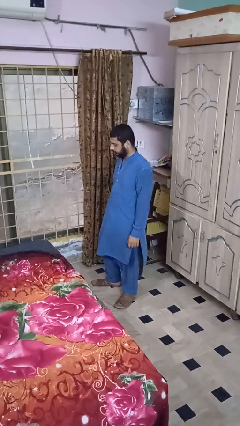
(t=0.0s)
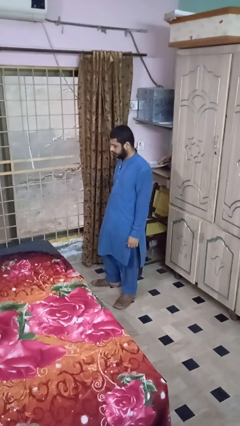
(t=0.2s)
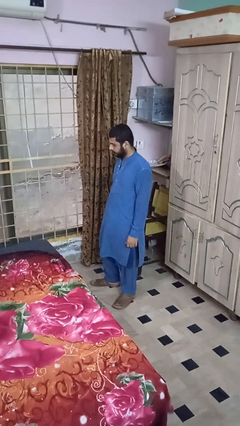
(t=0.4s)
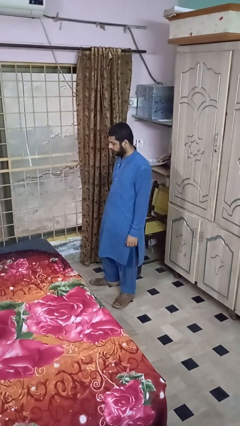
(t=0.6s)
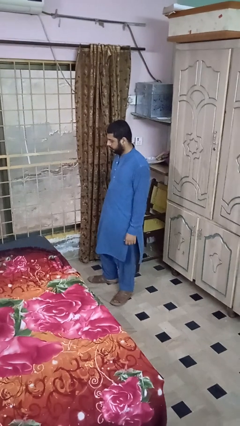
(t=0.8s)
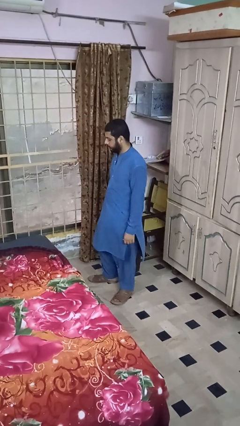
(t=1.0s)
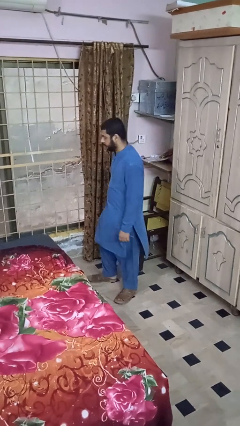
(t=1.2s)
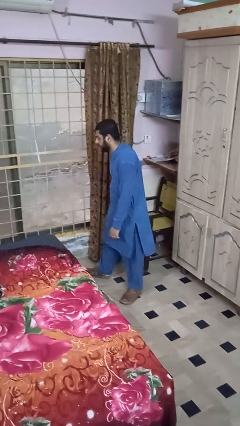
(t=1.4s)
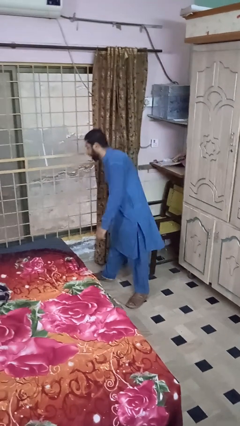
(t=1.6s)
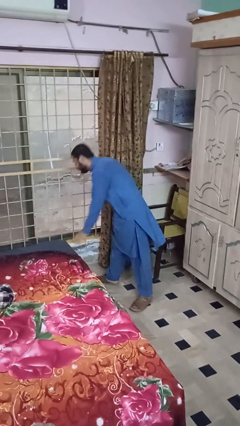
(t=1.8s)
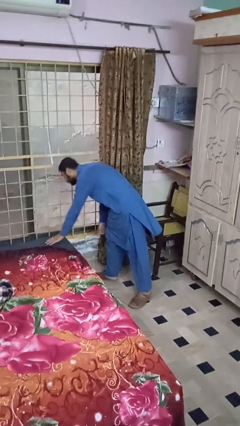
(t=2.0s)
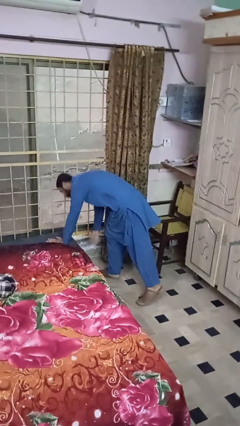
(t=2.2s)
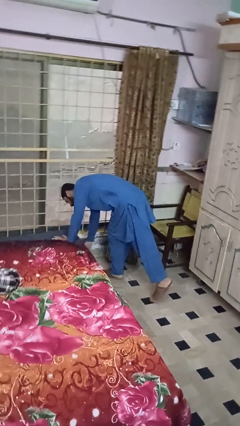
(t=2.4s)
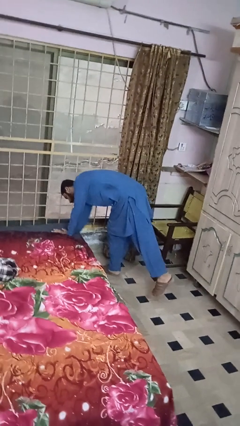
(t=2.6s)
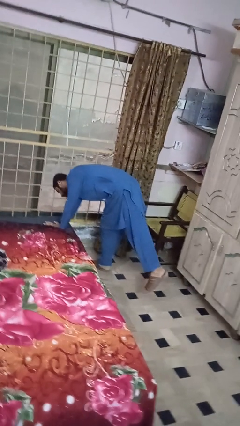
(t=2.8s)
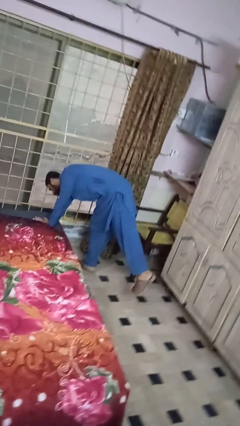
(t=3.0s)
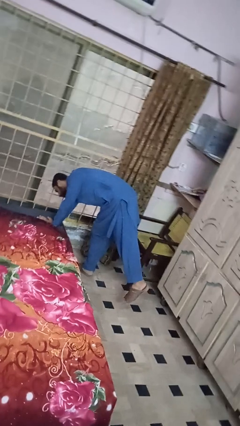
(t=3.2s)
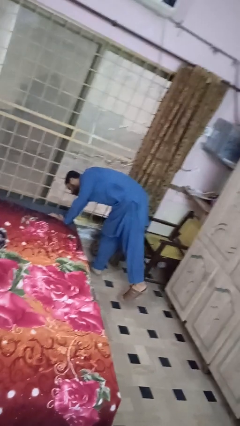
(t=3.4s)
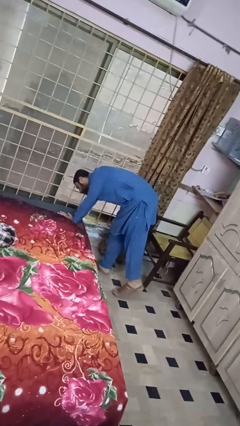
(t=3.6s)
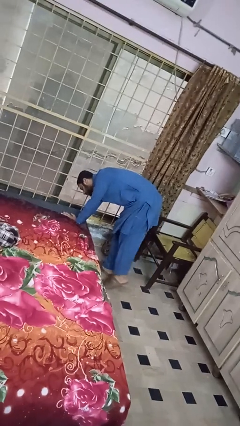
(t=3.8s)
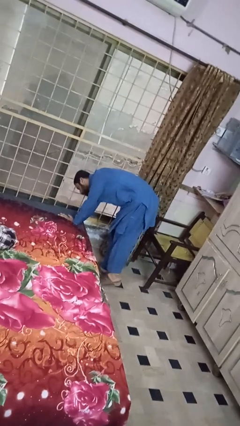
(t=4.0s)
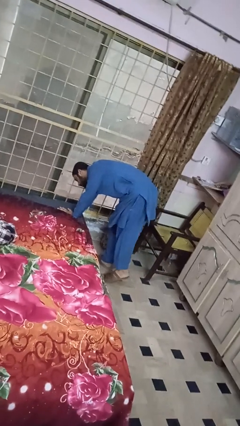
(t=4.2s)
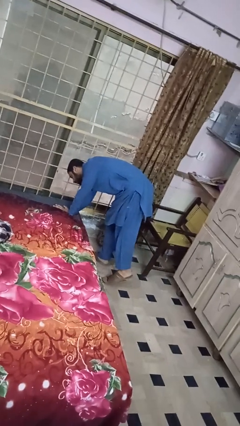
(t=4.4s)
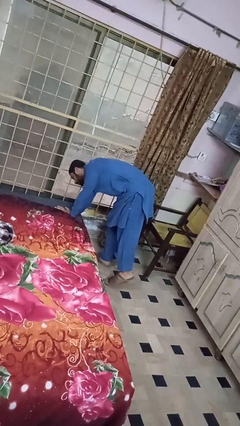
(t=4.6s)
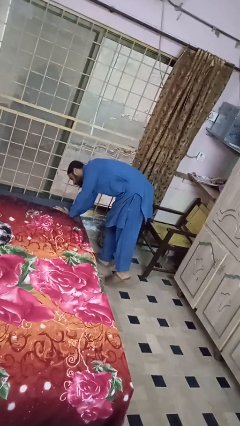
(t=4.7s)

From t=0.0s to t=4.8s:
person searches under bed

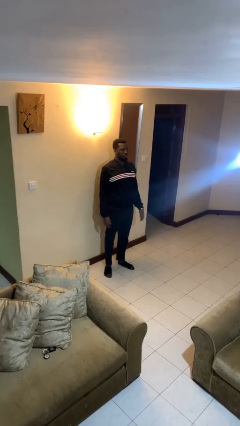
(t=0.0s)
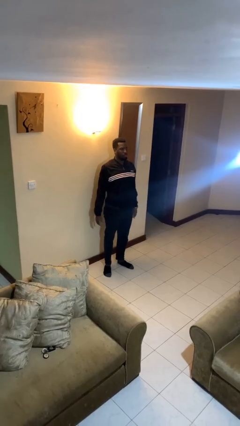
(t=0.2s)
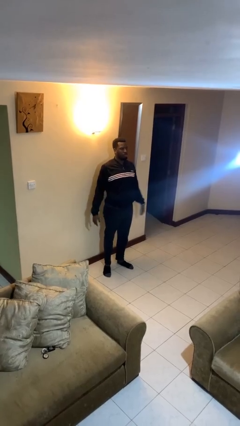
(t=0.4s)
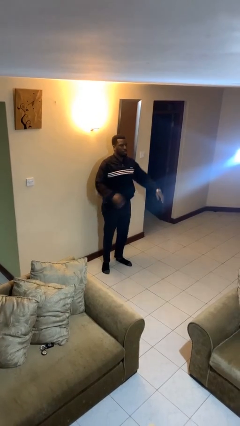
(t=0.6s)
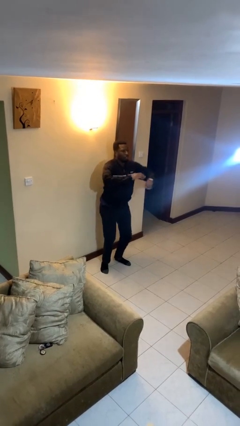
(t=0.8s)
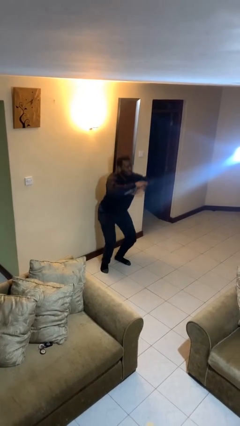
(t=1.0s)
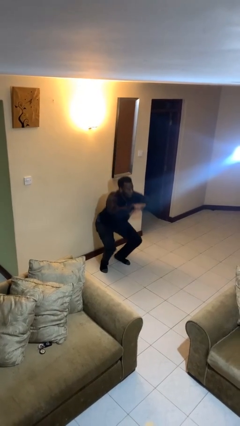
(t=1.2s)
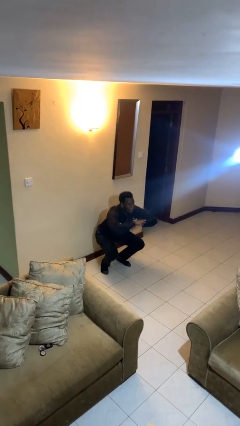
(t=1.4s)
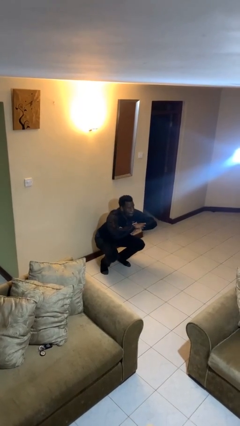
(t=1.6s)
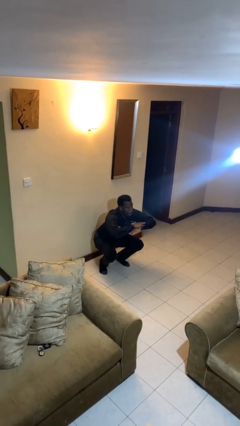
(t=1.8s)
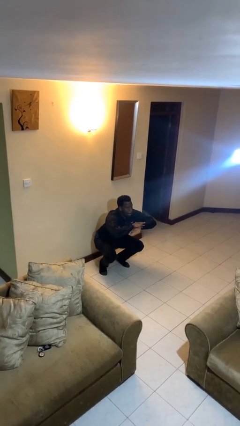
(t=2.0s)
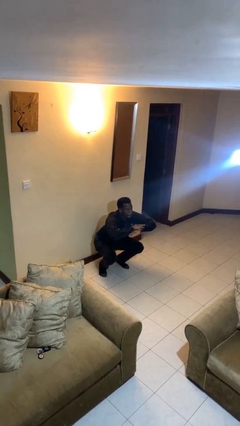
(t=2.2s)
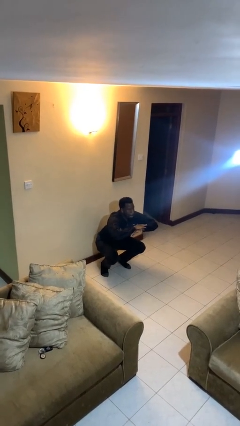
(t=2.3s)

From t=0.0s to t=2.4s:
person squats

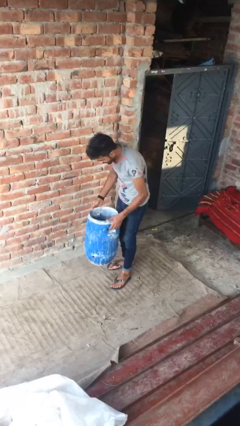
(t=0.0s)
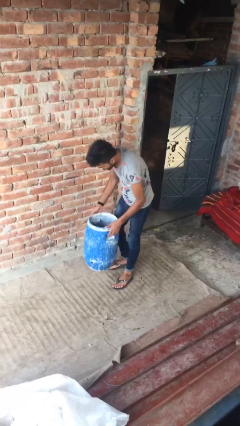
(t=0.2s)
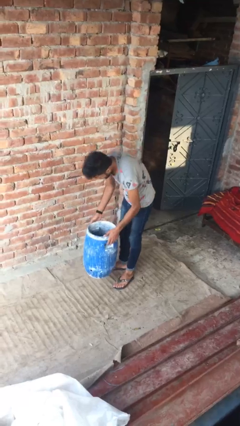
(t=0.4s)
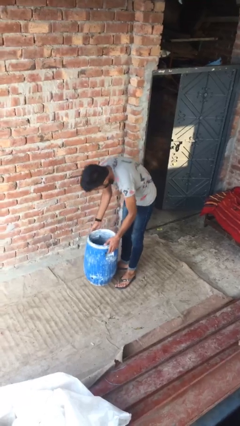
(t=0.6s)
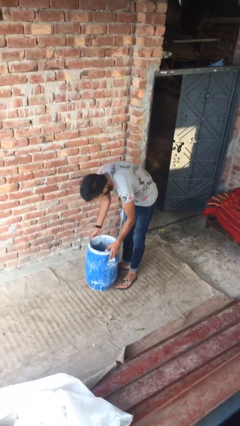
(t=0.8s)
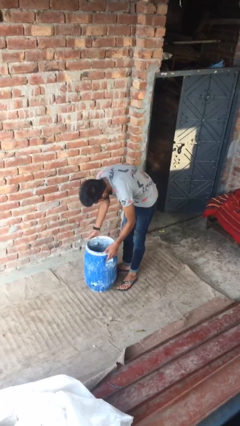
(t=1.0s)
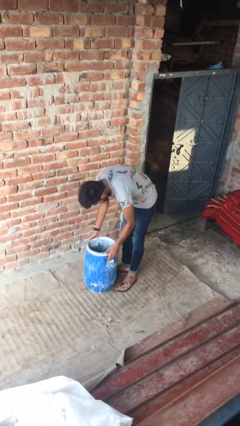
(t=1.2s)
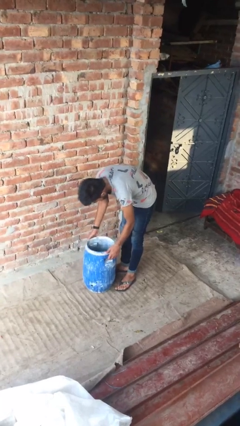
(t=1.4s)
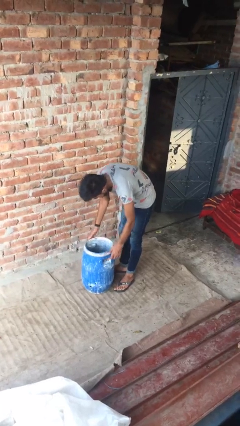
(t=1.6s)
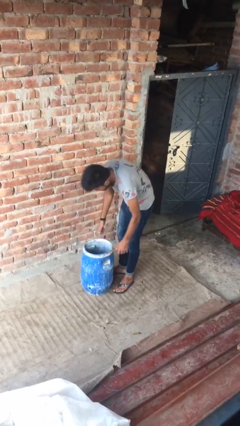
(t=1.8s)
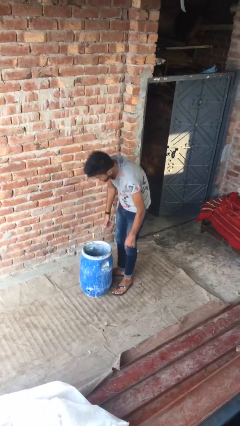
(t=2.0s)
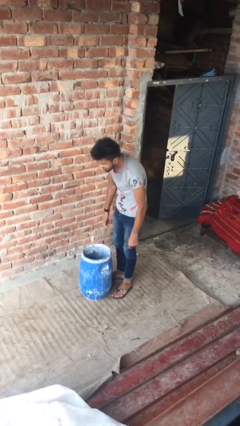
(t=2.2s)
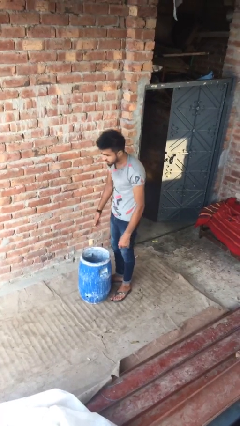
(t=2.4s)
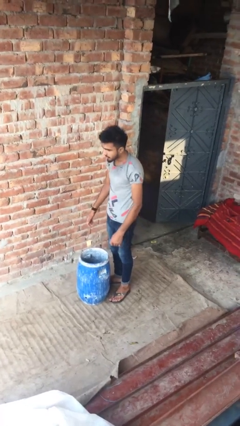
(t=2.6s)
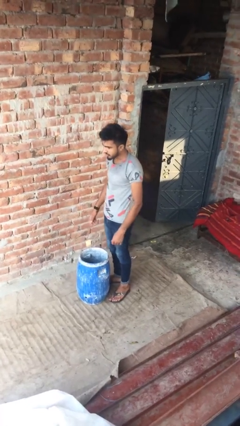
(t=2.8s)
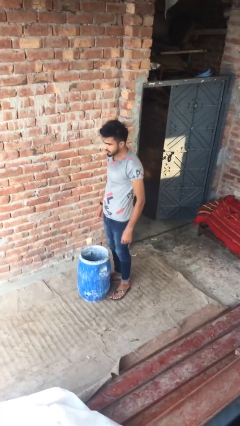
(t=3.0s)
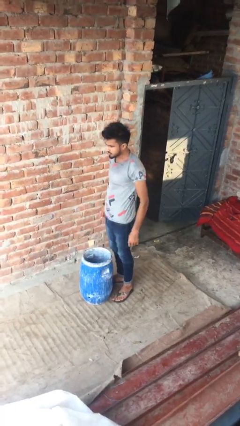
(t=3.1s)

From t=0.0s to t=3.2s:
person puts down object on floor

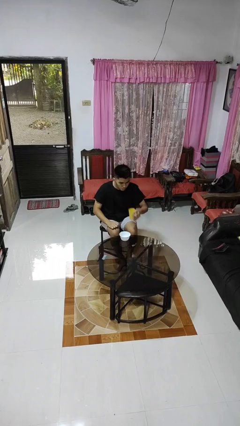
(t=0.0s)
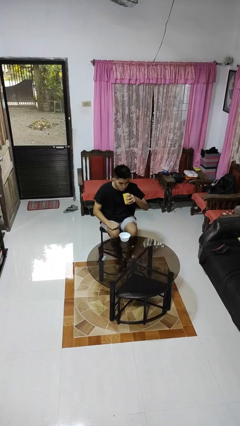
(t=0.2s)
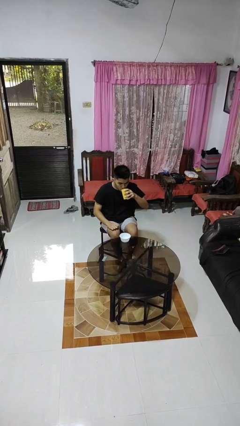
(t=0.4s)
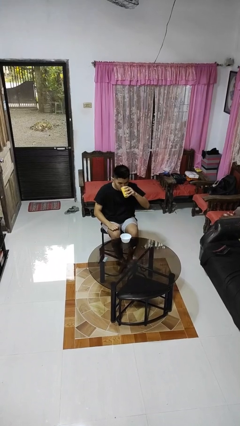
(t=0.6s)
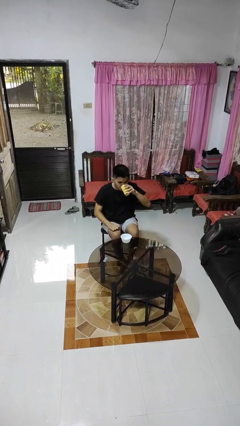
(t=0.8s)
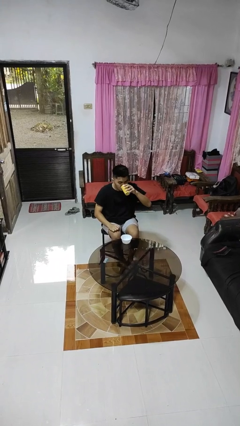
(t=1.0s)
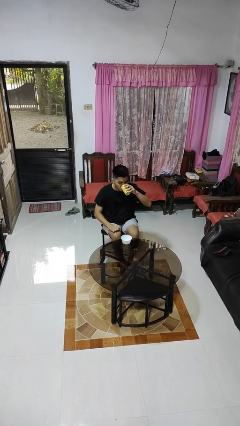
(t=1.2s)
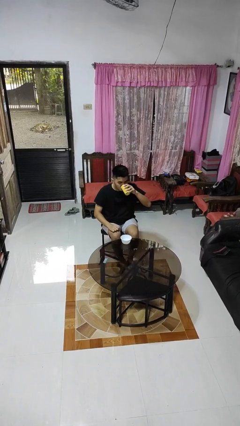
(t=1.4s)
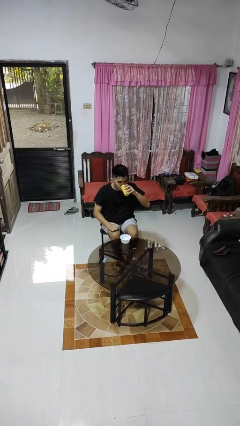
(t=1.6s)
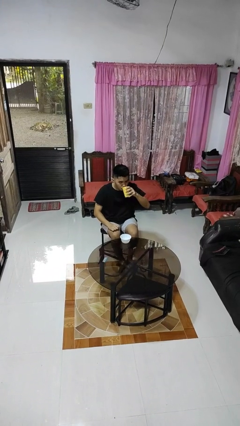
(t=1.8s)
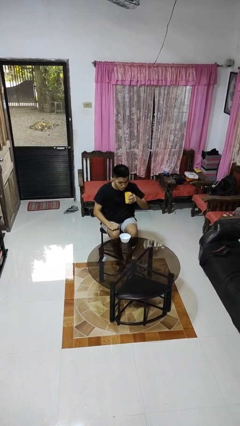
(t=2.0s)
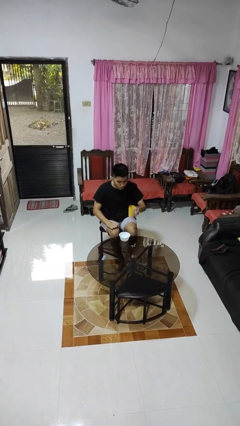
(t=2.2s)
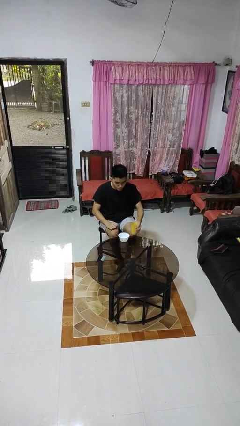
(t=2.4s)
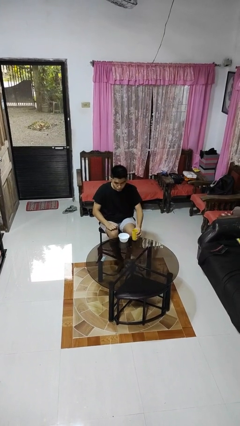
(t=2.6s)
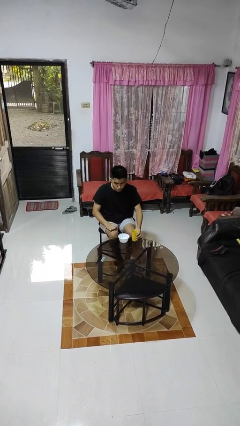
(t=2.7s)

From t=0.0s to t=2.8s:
person drinks from cup

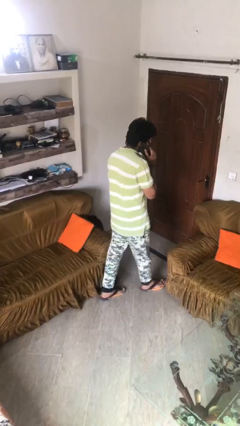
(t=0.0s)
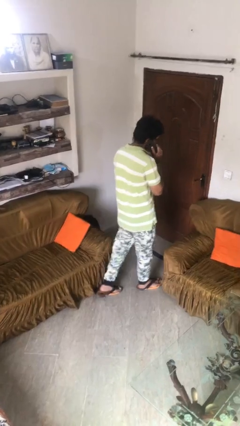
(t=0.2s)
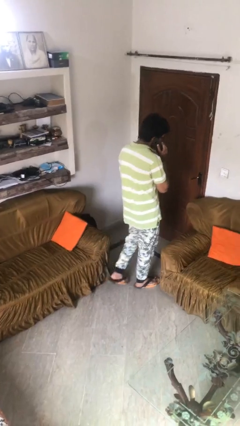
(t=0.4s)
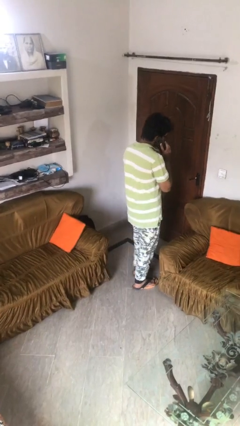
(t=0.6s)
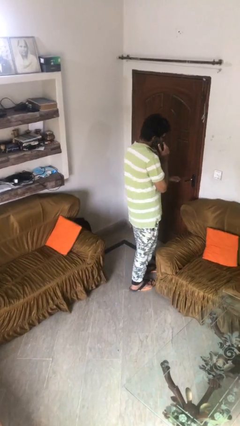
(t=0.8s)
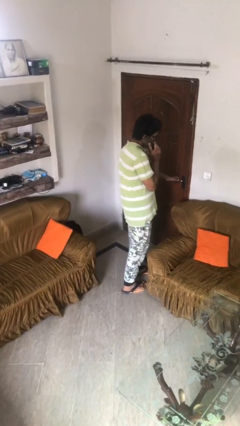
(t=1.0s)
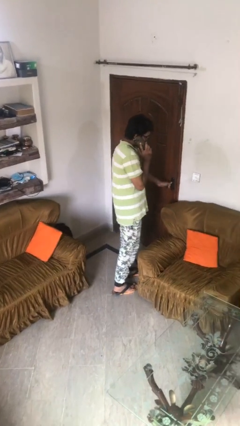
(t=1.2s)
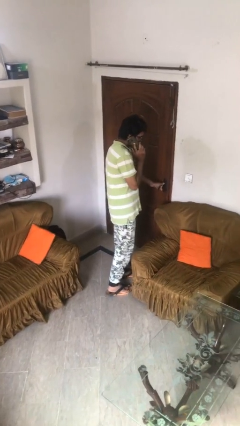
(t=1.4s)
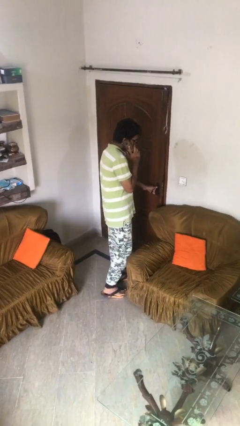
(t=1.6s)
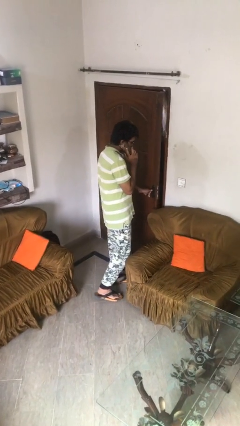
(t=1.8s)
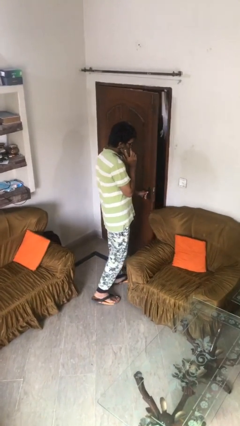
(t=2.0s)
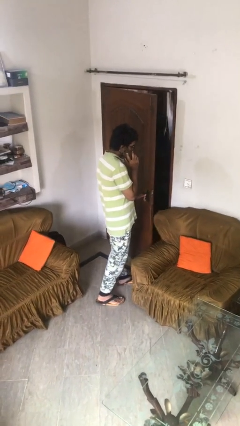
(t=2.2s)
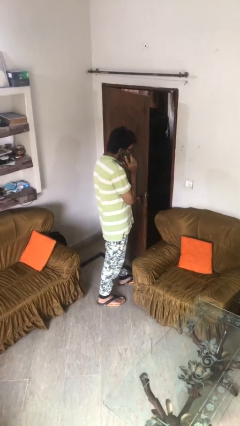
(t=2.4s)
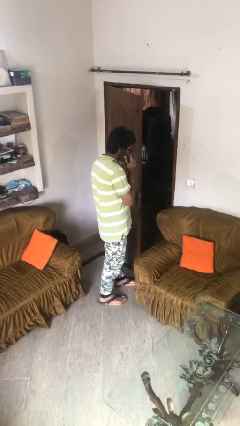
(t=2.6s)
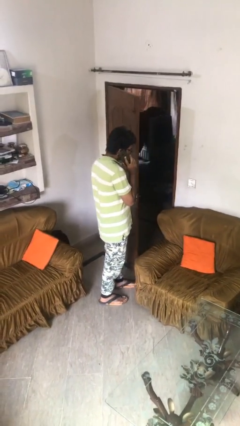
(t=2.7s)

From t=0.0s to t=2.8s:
person opens facility door

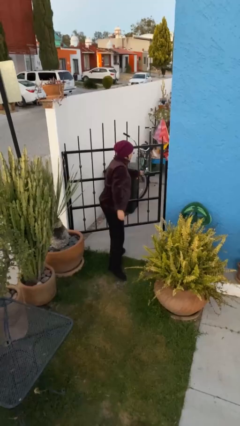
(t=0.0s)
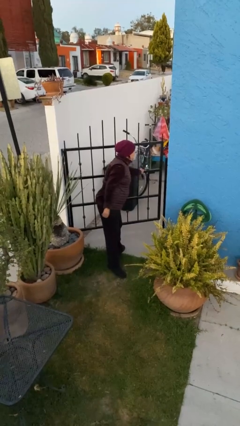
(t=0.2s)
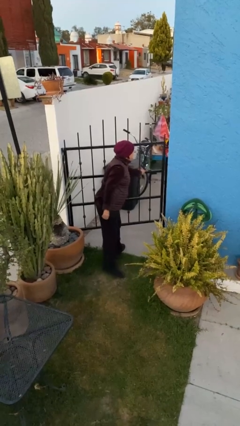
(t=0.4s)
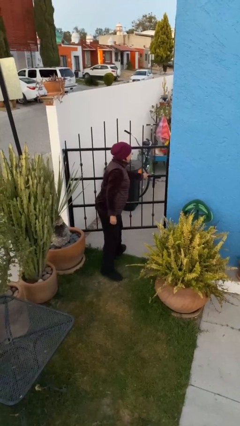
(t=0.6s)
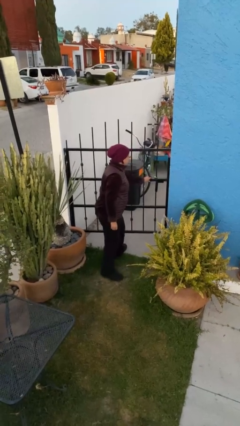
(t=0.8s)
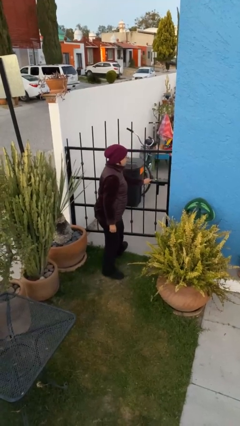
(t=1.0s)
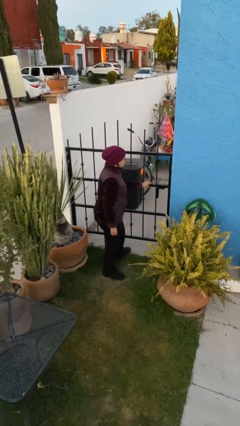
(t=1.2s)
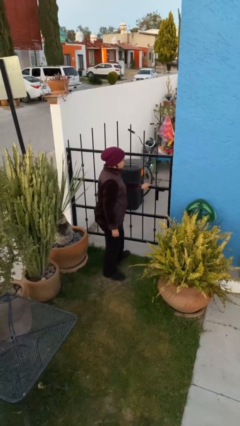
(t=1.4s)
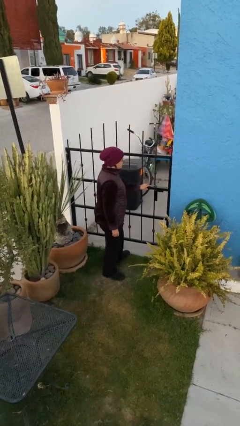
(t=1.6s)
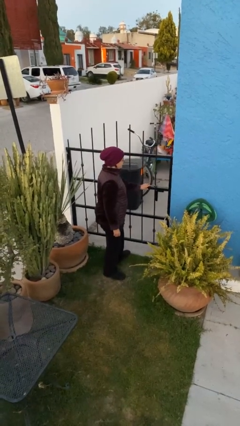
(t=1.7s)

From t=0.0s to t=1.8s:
person closes facility door
